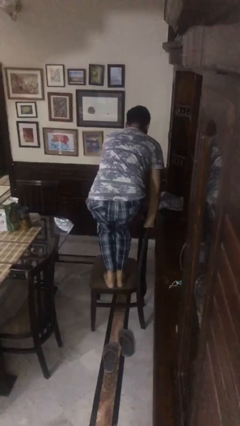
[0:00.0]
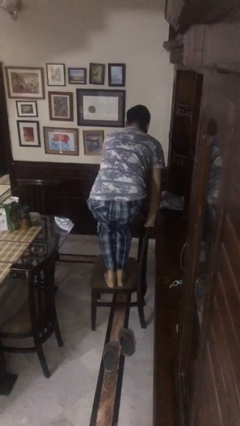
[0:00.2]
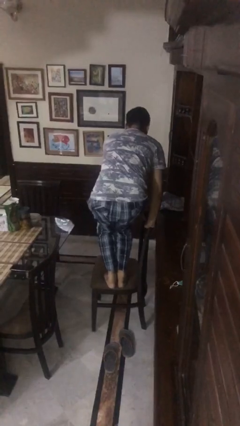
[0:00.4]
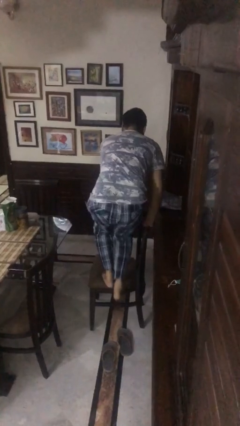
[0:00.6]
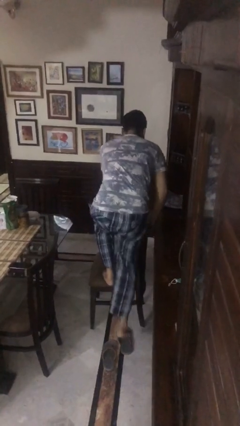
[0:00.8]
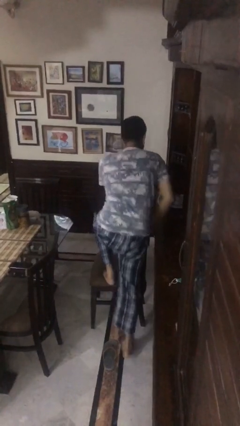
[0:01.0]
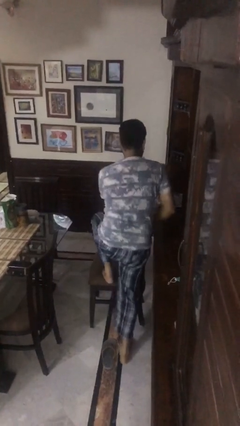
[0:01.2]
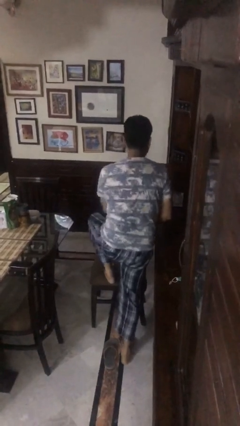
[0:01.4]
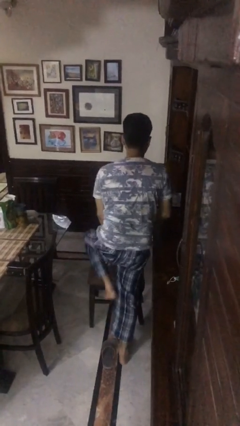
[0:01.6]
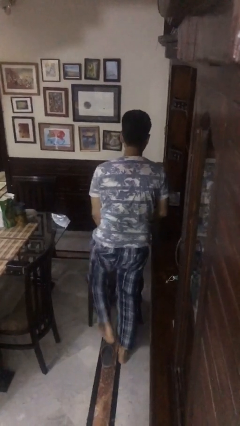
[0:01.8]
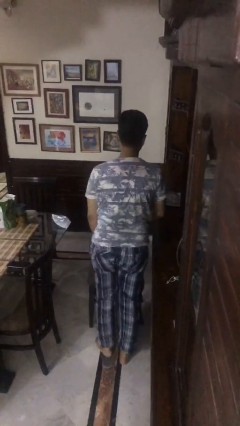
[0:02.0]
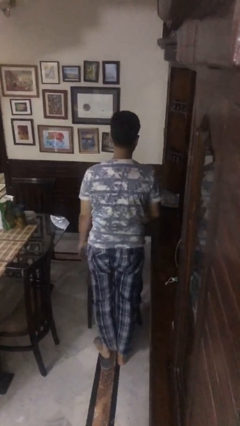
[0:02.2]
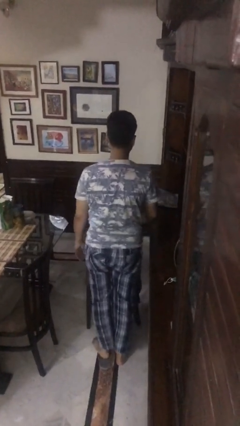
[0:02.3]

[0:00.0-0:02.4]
person climbs off chair

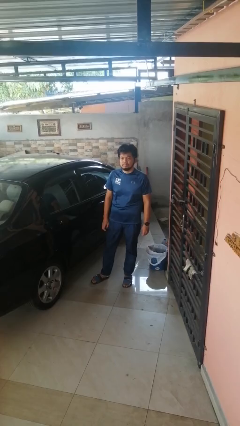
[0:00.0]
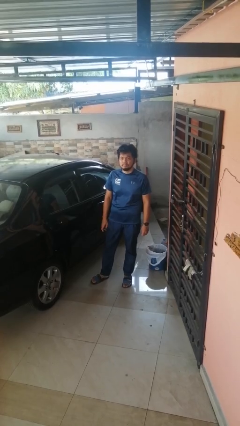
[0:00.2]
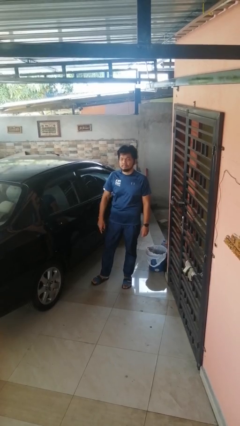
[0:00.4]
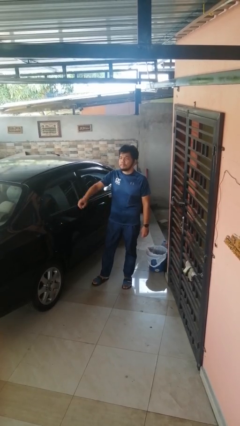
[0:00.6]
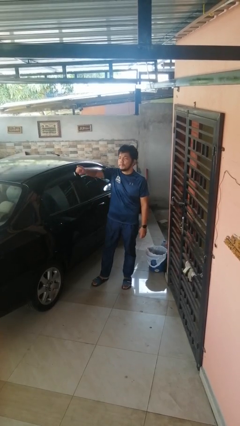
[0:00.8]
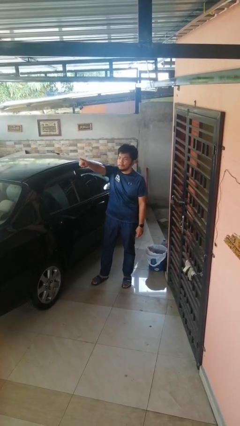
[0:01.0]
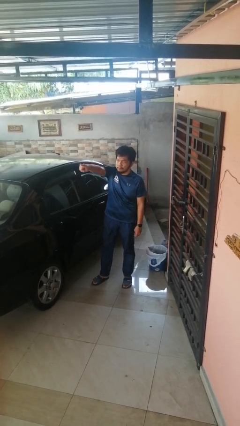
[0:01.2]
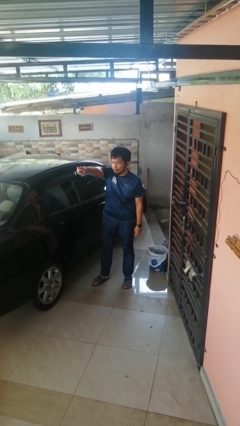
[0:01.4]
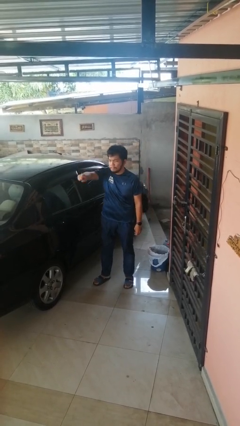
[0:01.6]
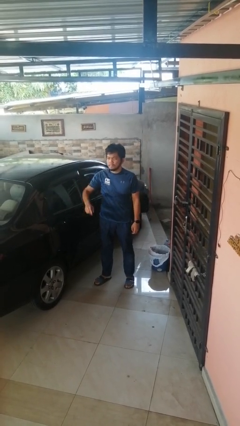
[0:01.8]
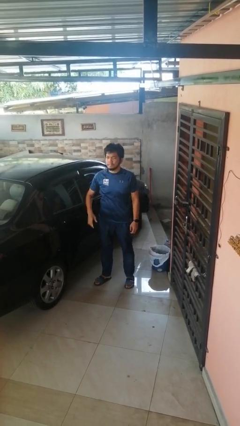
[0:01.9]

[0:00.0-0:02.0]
person points at person

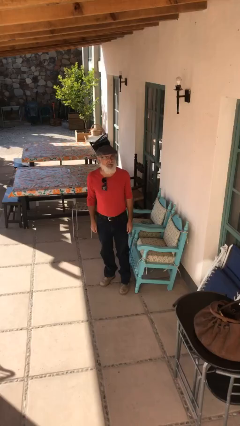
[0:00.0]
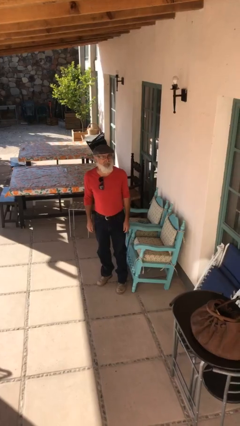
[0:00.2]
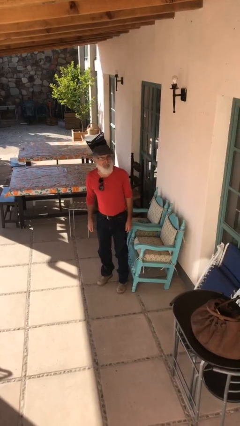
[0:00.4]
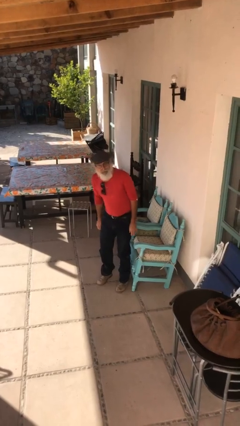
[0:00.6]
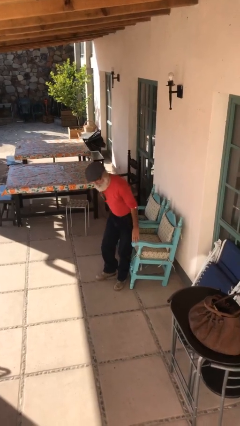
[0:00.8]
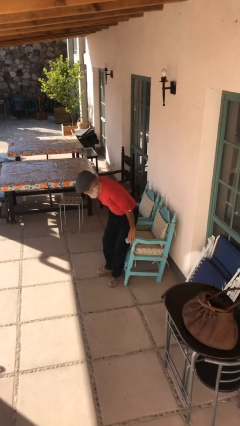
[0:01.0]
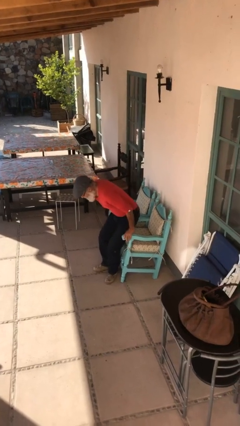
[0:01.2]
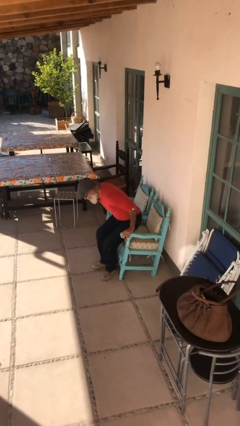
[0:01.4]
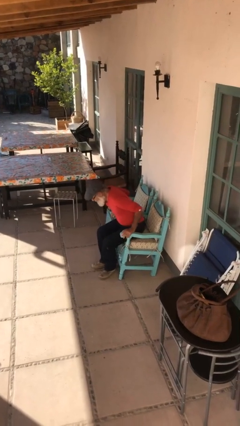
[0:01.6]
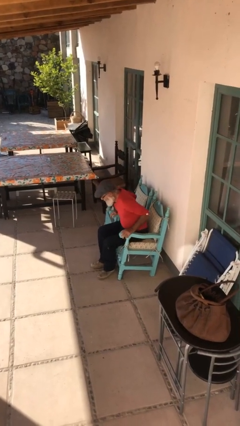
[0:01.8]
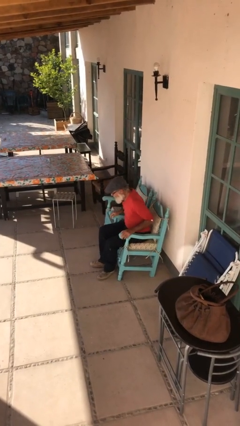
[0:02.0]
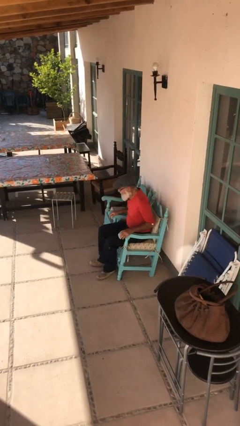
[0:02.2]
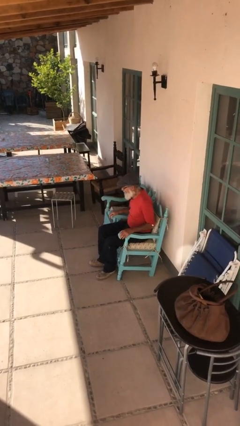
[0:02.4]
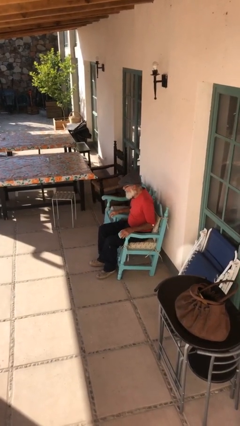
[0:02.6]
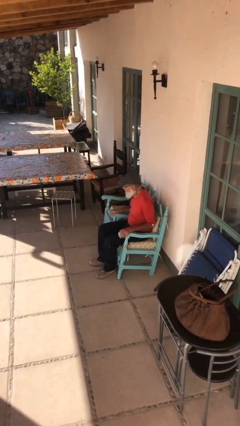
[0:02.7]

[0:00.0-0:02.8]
person sits down

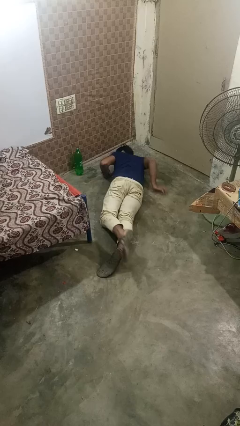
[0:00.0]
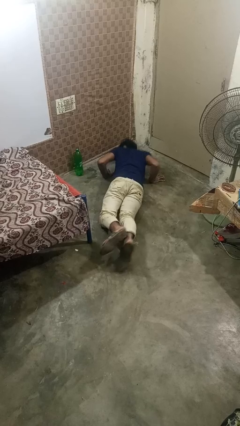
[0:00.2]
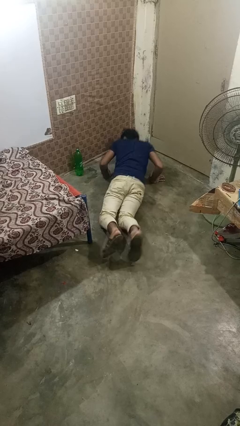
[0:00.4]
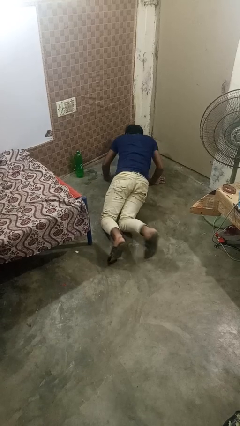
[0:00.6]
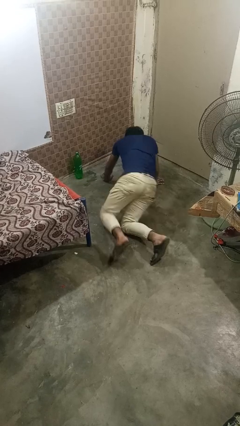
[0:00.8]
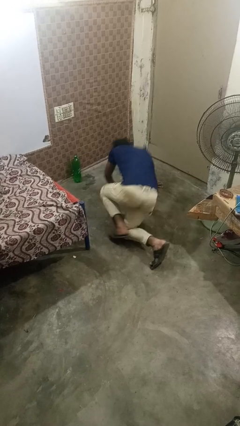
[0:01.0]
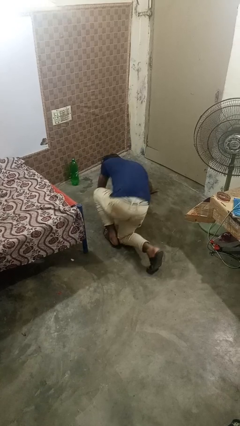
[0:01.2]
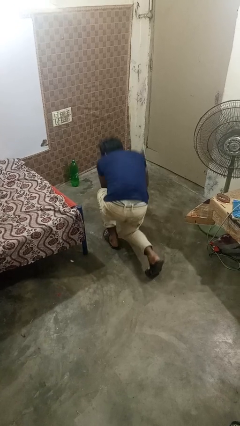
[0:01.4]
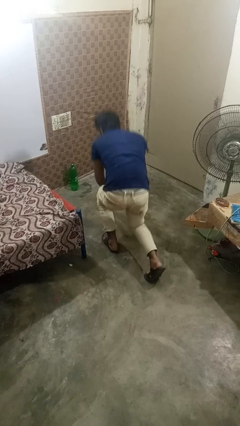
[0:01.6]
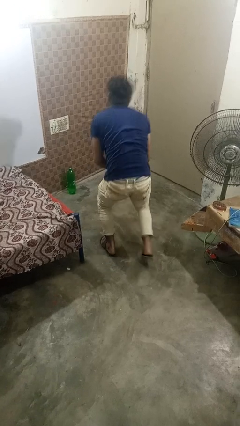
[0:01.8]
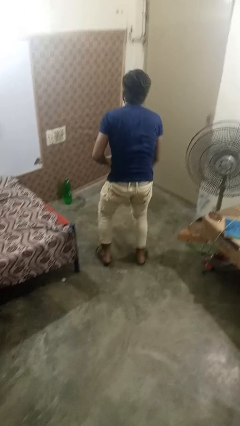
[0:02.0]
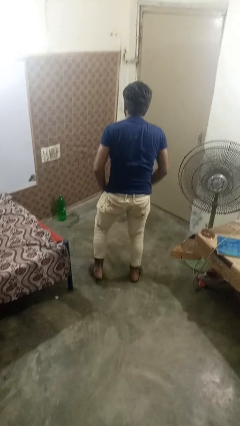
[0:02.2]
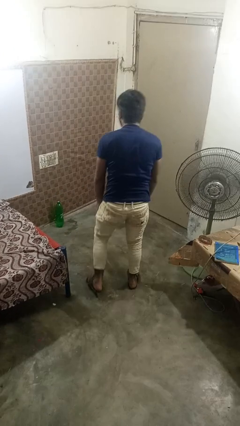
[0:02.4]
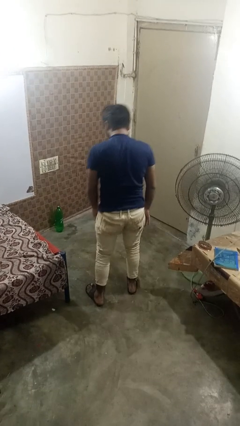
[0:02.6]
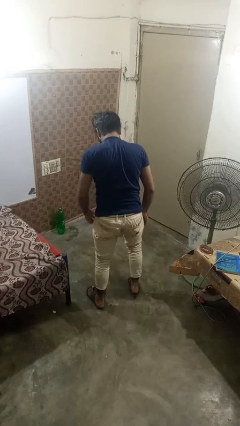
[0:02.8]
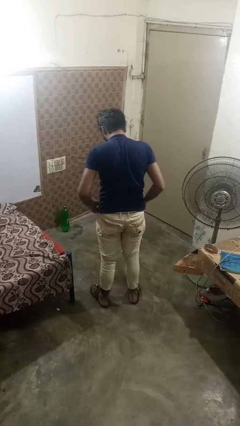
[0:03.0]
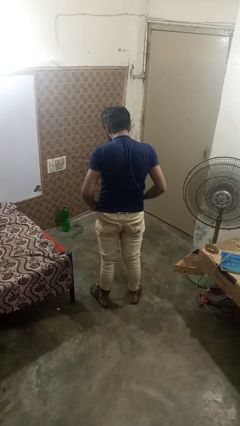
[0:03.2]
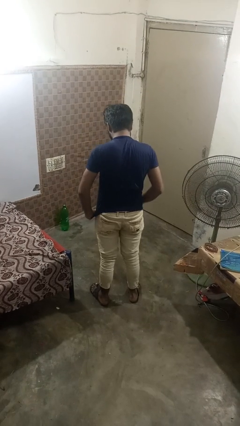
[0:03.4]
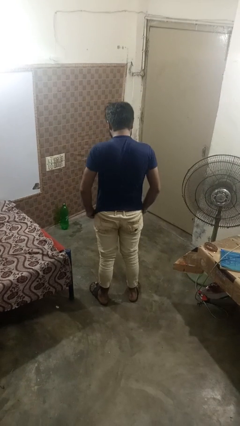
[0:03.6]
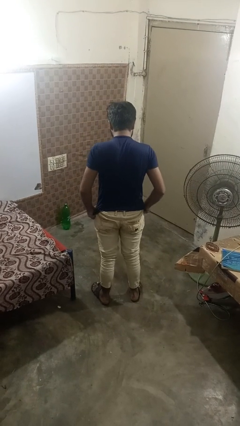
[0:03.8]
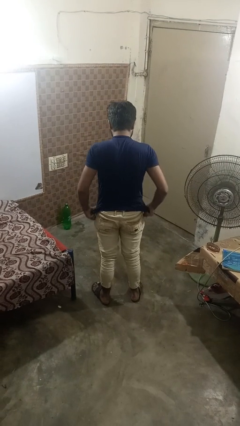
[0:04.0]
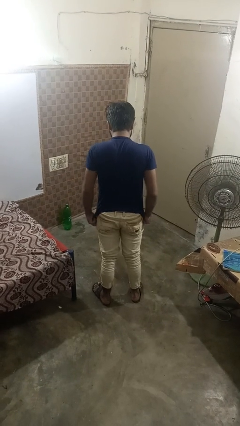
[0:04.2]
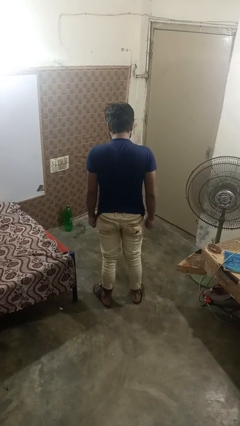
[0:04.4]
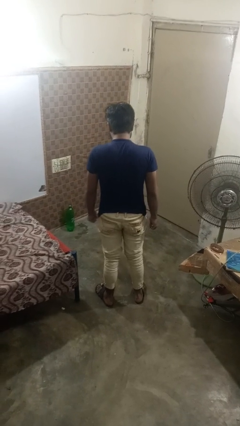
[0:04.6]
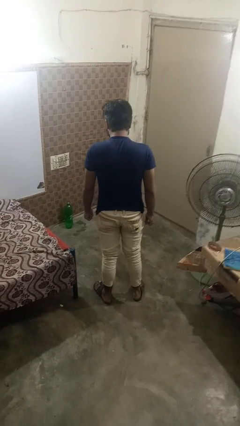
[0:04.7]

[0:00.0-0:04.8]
person stands up from floor

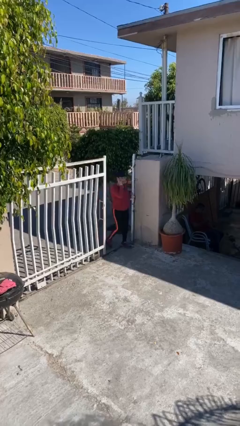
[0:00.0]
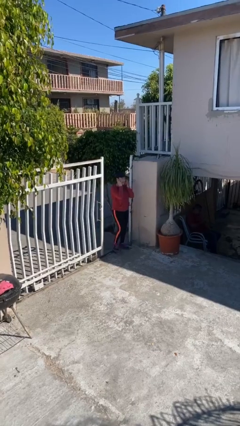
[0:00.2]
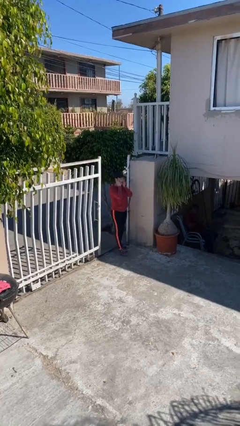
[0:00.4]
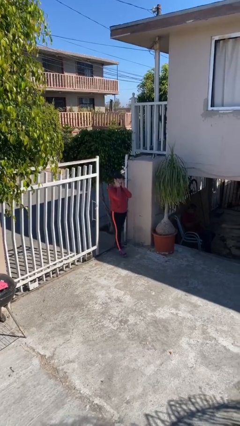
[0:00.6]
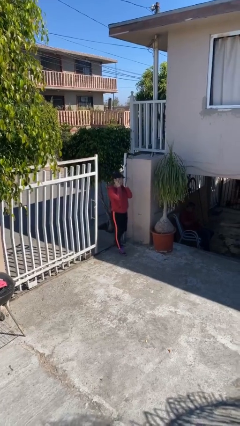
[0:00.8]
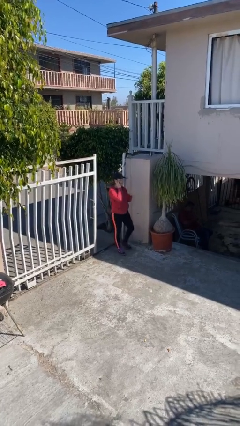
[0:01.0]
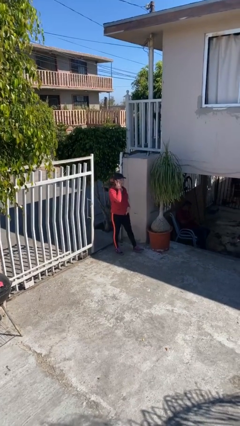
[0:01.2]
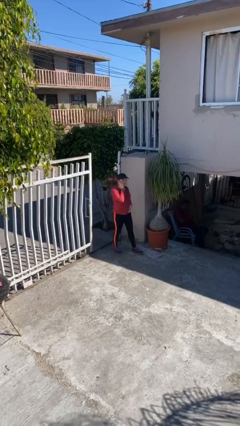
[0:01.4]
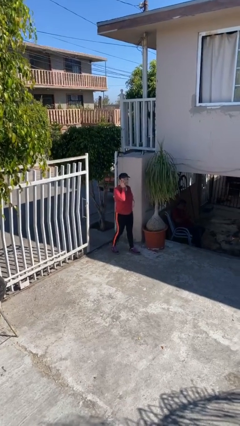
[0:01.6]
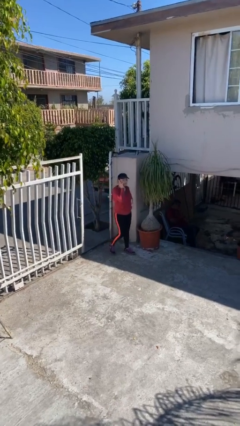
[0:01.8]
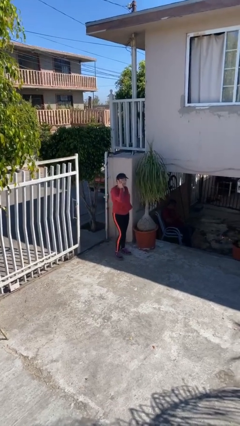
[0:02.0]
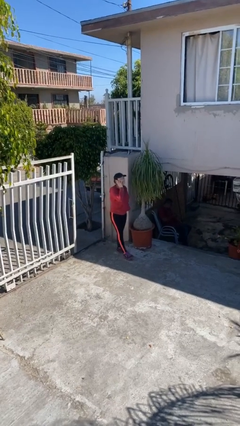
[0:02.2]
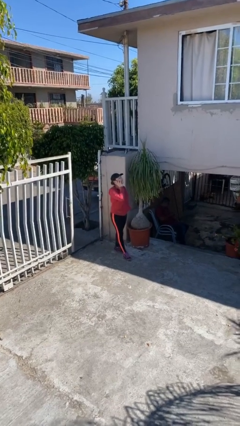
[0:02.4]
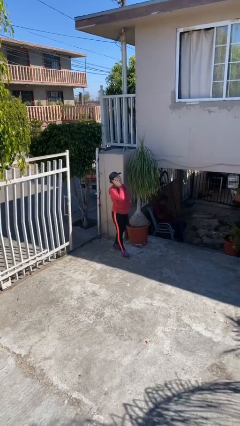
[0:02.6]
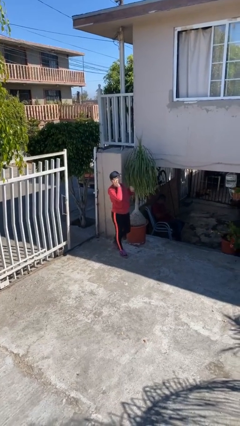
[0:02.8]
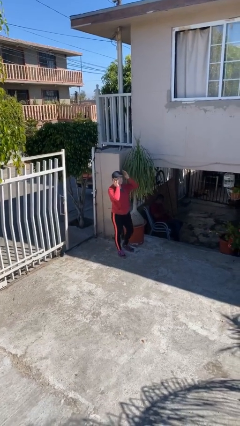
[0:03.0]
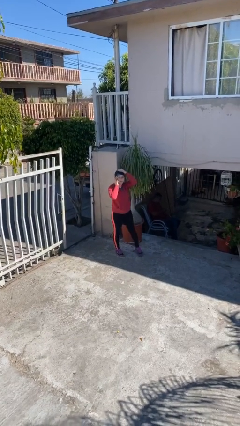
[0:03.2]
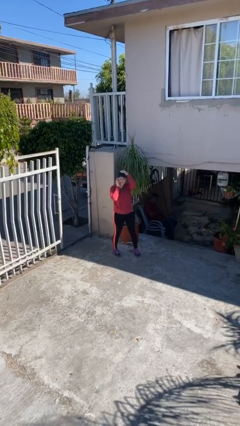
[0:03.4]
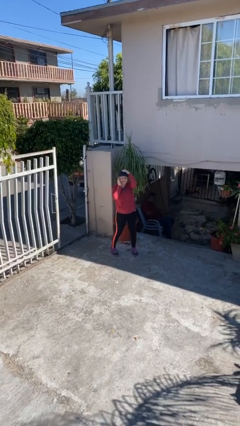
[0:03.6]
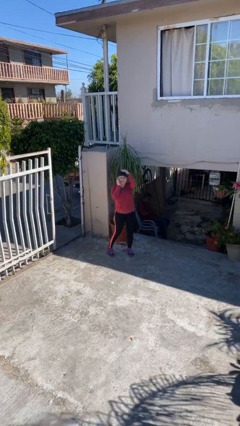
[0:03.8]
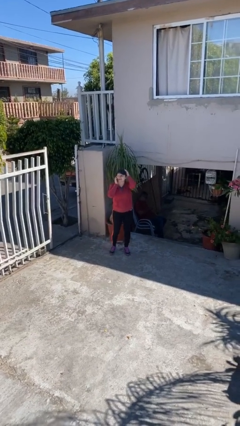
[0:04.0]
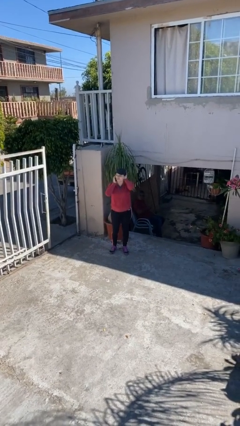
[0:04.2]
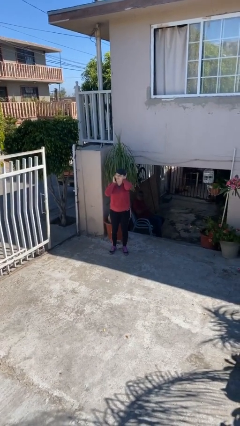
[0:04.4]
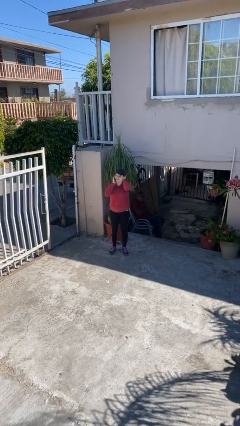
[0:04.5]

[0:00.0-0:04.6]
person enters scene through structure

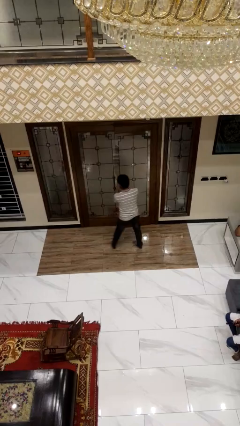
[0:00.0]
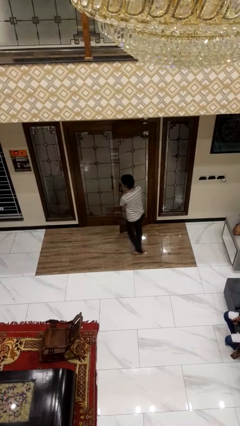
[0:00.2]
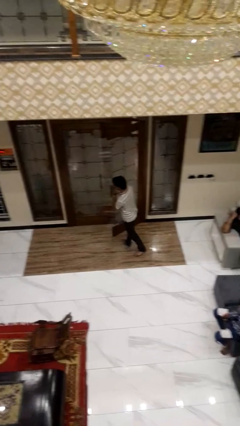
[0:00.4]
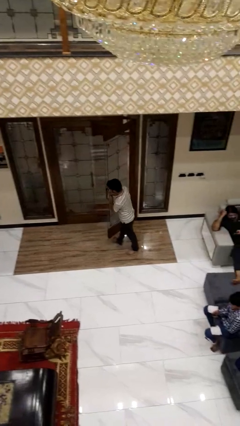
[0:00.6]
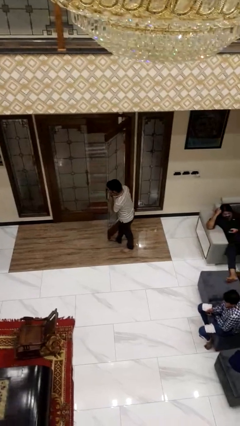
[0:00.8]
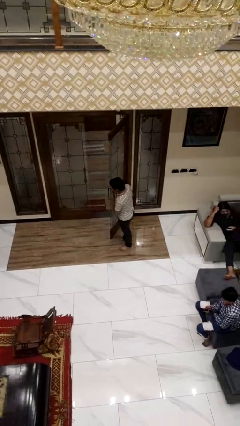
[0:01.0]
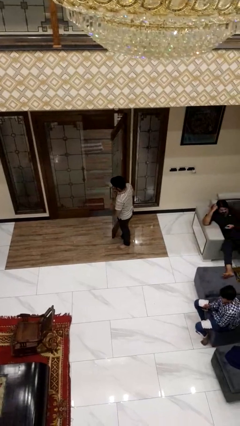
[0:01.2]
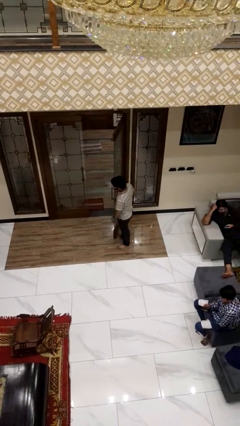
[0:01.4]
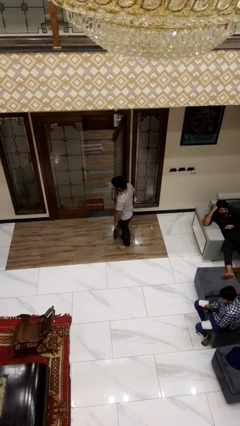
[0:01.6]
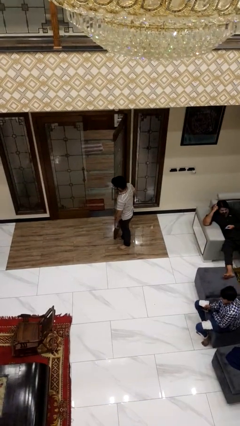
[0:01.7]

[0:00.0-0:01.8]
person opens facility door
